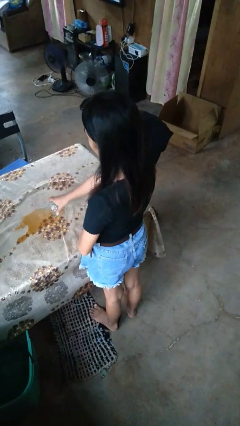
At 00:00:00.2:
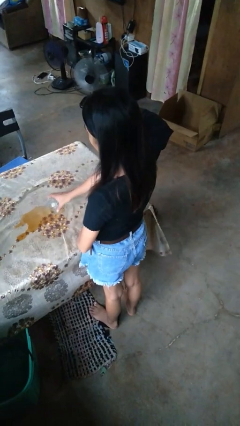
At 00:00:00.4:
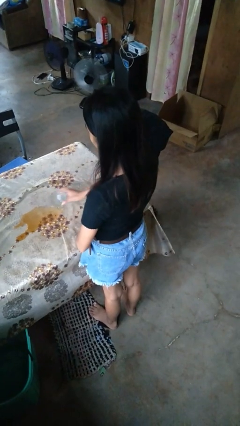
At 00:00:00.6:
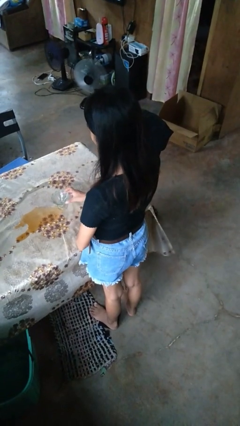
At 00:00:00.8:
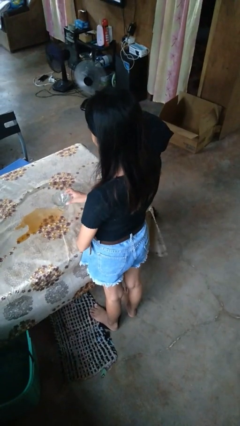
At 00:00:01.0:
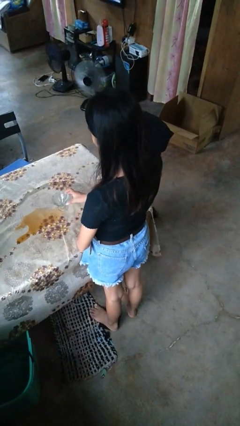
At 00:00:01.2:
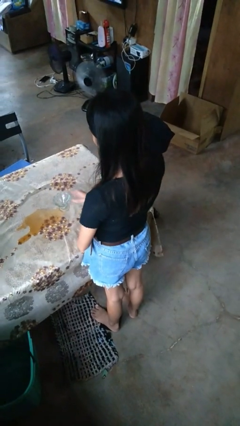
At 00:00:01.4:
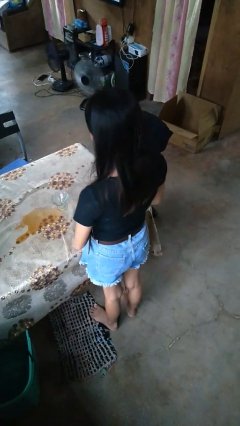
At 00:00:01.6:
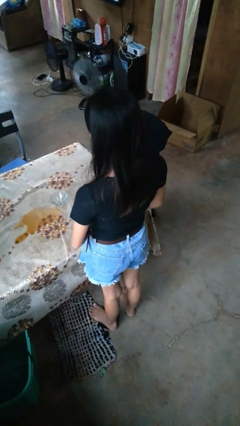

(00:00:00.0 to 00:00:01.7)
person sets upright glass

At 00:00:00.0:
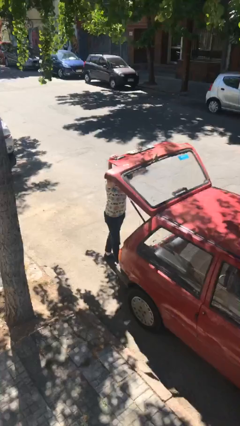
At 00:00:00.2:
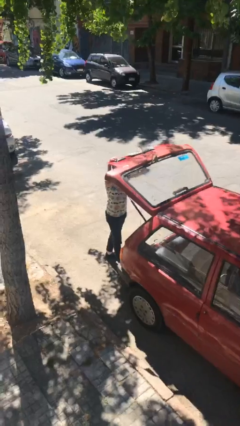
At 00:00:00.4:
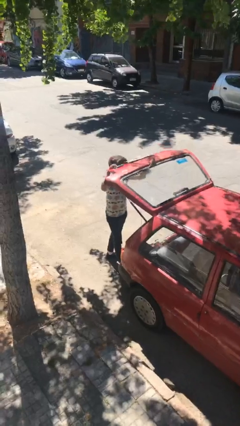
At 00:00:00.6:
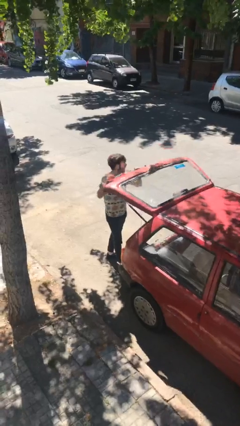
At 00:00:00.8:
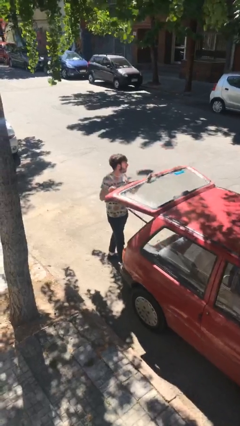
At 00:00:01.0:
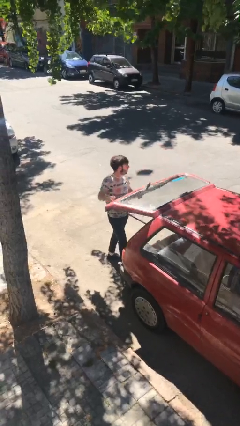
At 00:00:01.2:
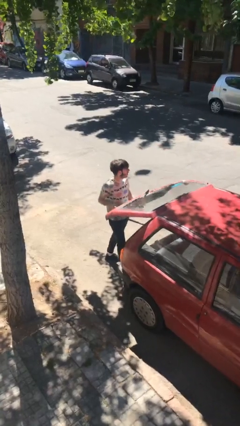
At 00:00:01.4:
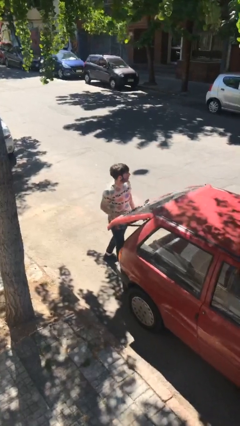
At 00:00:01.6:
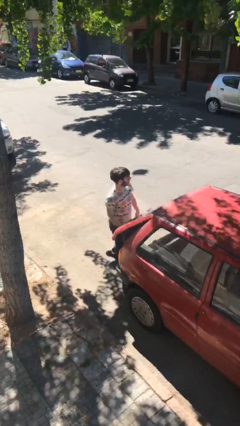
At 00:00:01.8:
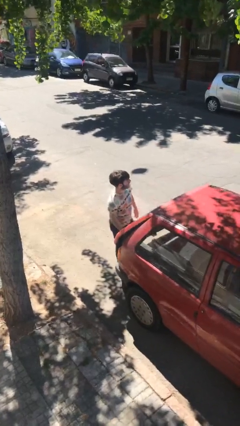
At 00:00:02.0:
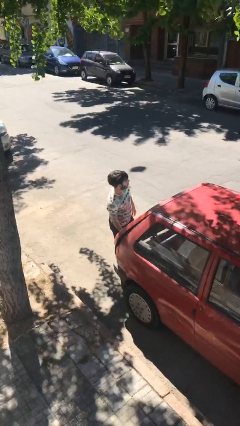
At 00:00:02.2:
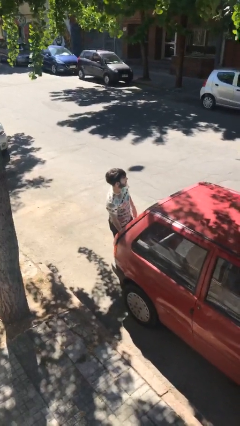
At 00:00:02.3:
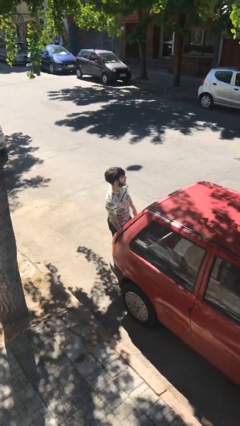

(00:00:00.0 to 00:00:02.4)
person closes car trunk

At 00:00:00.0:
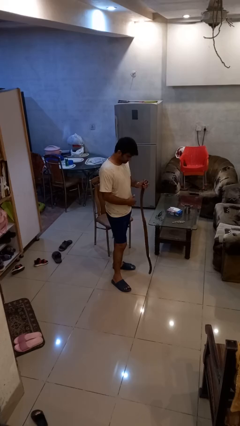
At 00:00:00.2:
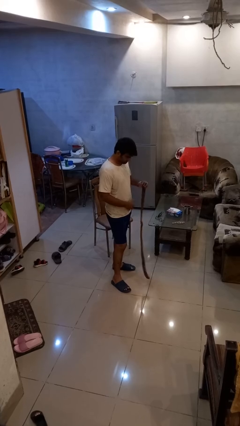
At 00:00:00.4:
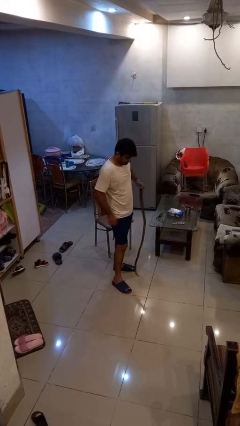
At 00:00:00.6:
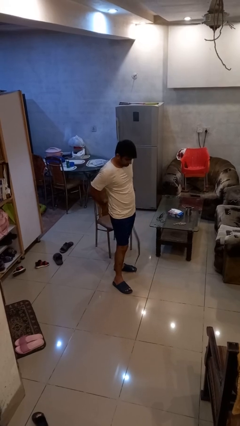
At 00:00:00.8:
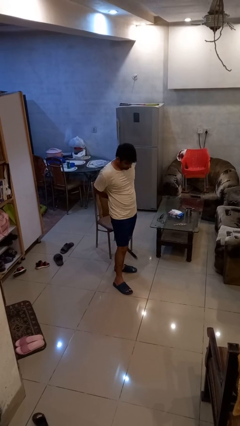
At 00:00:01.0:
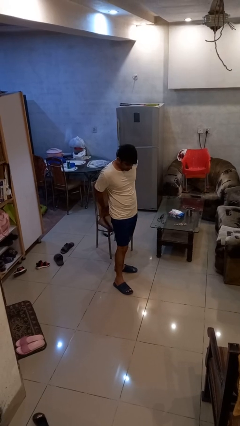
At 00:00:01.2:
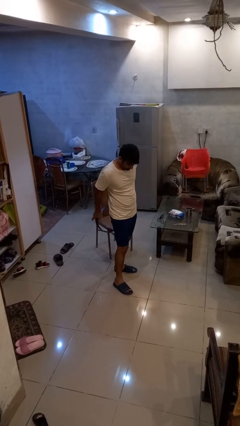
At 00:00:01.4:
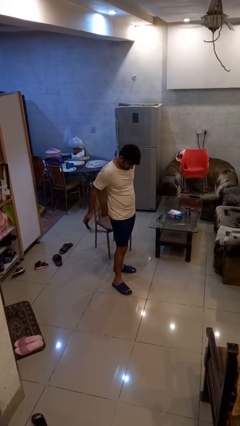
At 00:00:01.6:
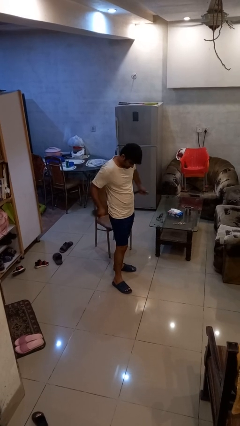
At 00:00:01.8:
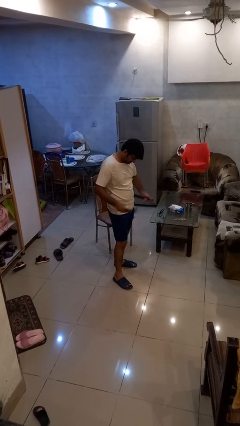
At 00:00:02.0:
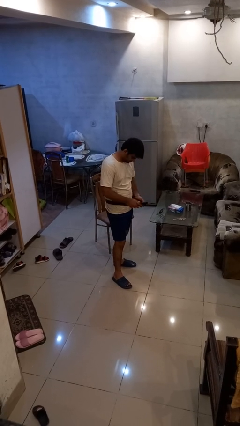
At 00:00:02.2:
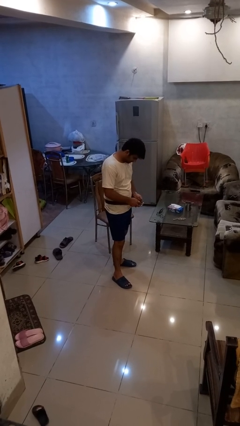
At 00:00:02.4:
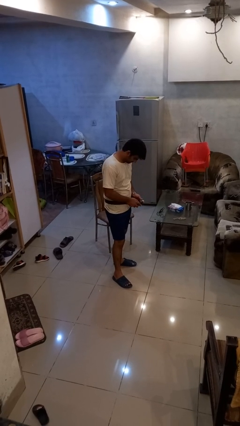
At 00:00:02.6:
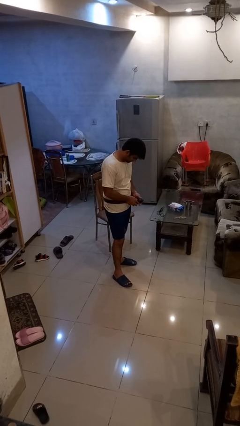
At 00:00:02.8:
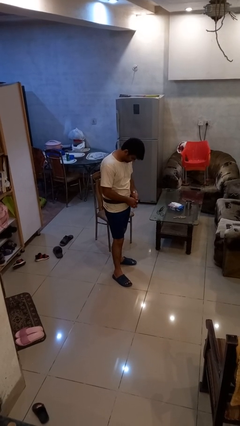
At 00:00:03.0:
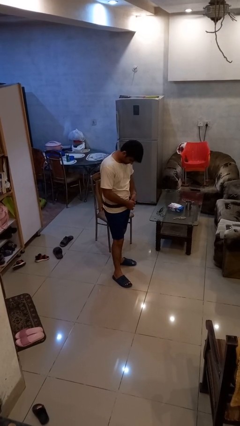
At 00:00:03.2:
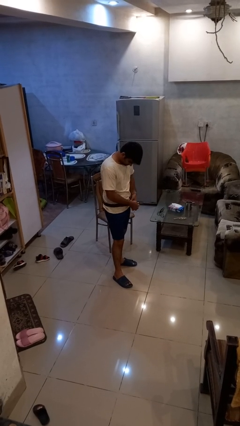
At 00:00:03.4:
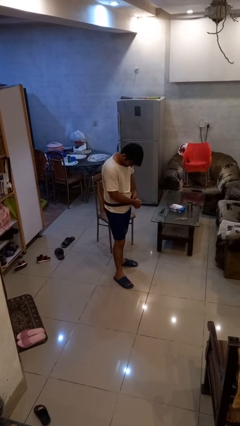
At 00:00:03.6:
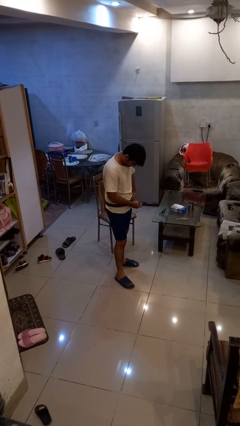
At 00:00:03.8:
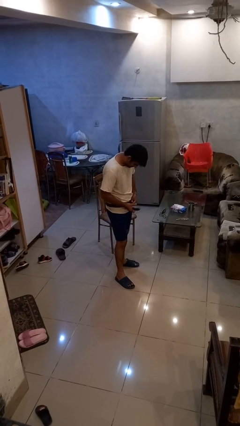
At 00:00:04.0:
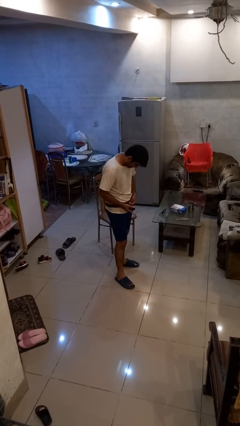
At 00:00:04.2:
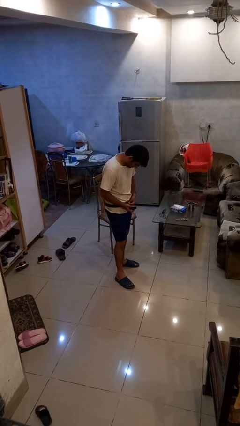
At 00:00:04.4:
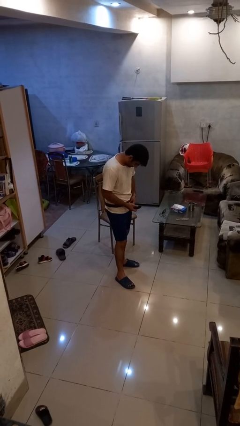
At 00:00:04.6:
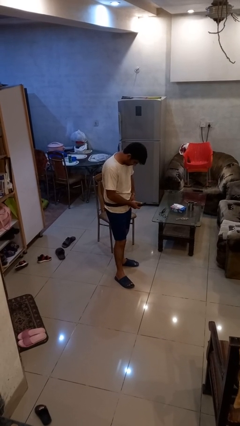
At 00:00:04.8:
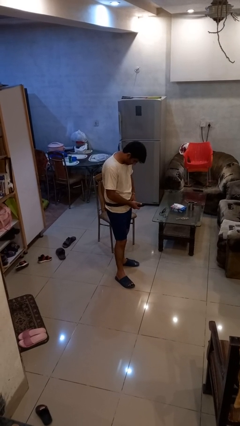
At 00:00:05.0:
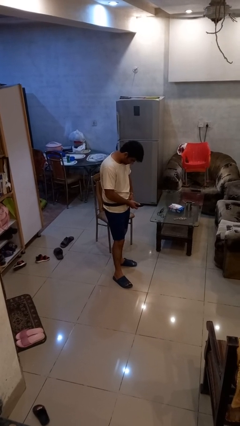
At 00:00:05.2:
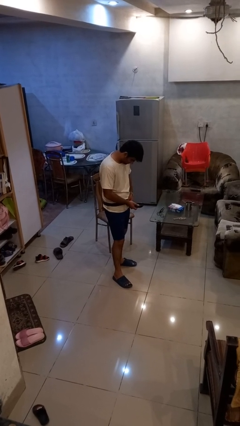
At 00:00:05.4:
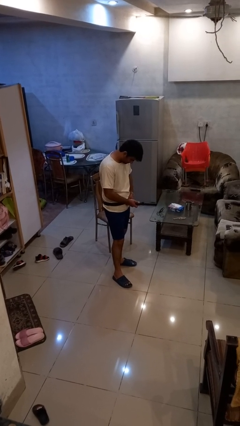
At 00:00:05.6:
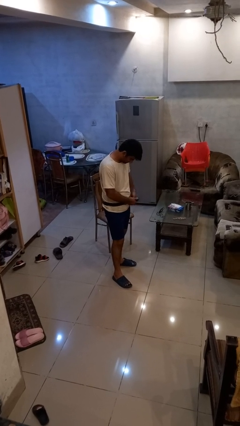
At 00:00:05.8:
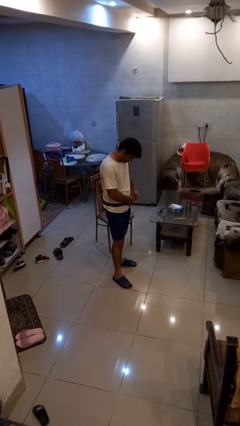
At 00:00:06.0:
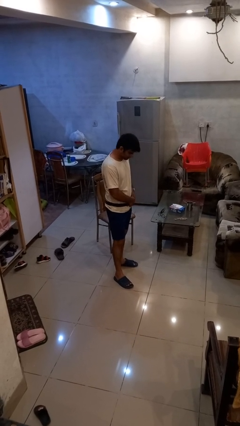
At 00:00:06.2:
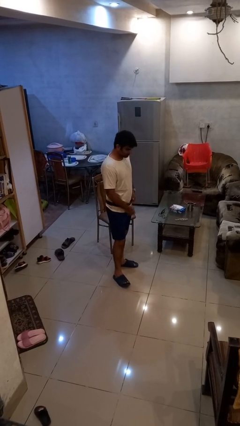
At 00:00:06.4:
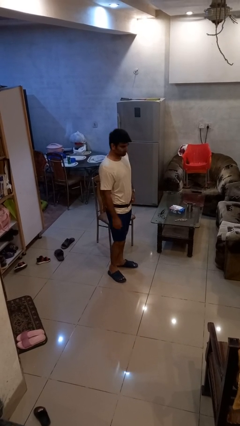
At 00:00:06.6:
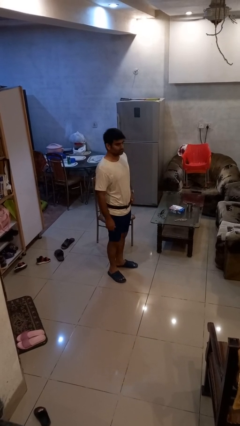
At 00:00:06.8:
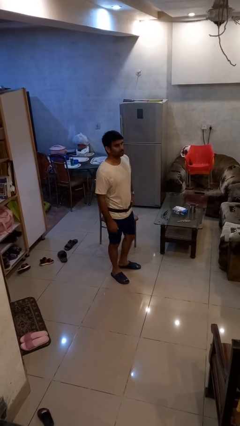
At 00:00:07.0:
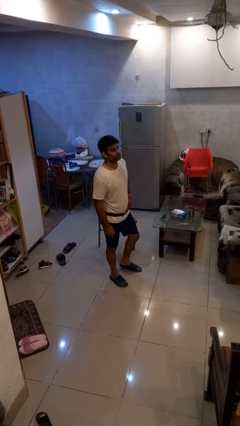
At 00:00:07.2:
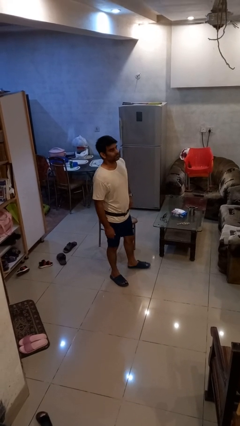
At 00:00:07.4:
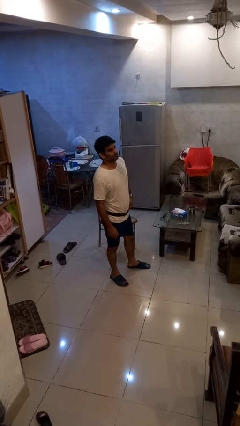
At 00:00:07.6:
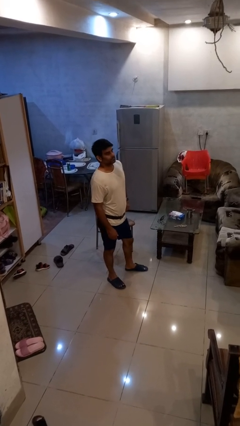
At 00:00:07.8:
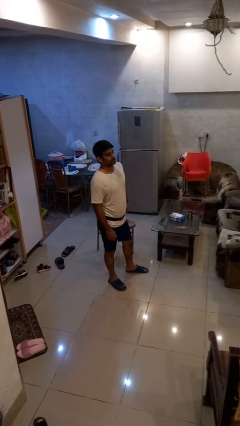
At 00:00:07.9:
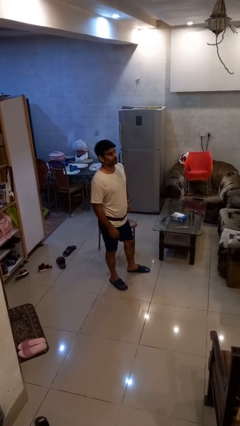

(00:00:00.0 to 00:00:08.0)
person puts on belt

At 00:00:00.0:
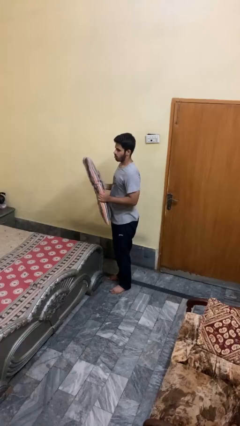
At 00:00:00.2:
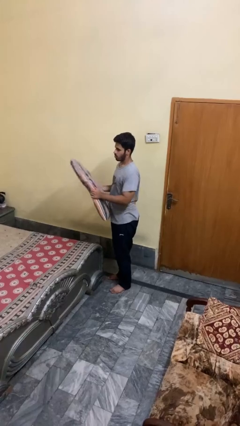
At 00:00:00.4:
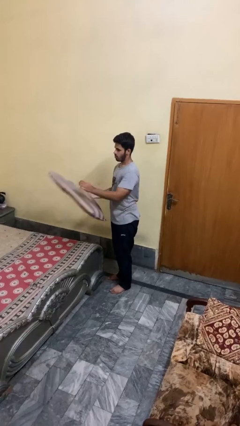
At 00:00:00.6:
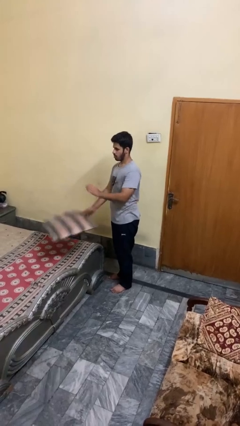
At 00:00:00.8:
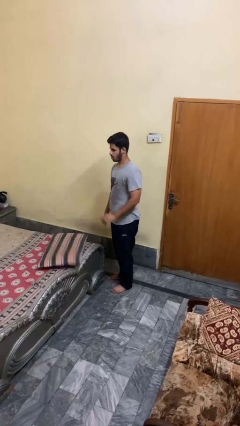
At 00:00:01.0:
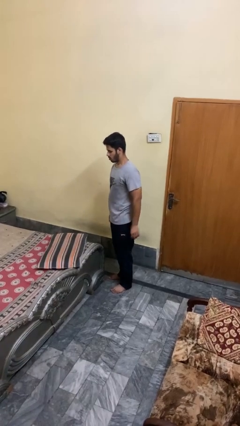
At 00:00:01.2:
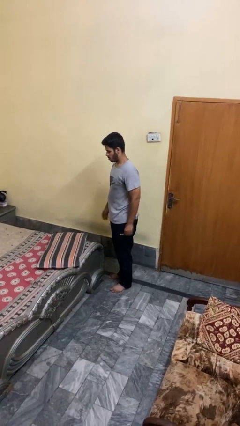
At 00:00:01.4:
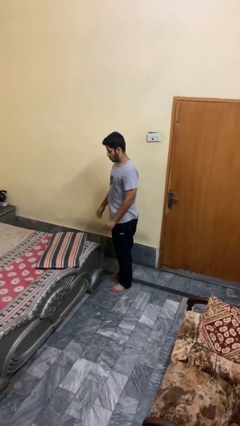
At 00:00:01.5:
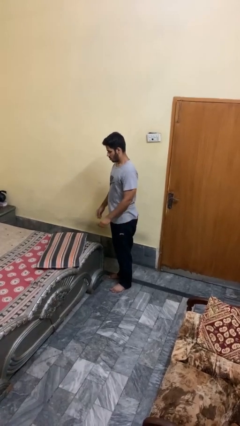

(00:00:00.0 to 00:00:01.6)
person puts down object on bed

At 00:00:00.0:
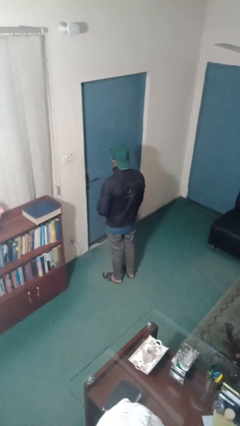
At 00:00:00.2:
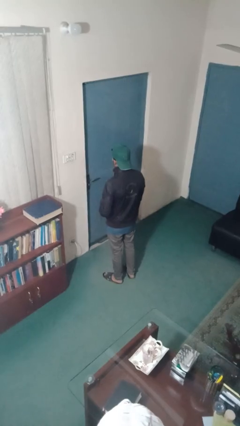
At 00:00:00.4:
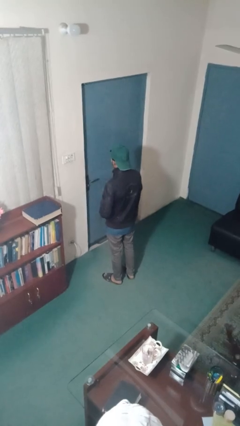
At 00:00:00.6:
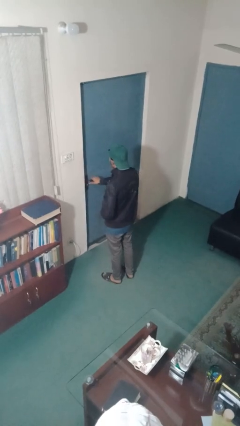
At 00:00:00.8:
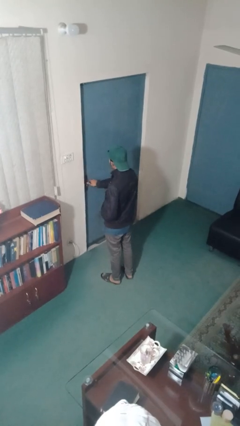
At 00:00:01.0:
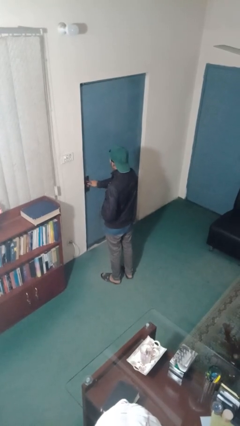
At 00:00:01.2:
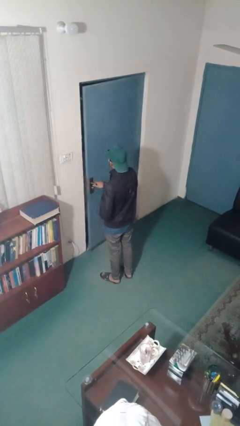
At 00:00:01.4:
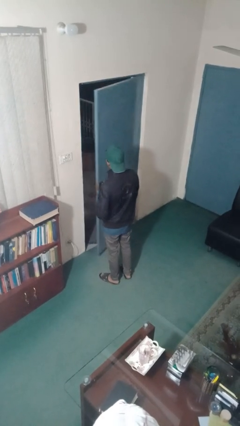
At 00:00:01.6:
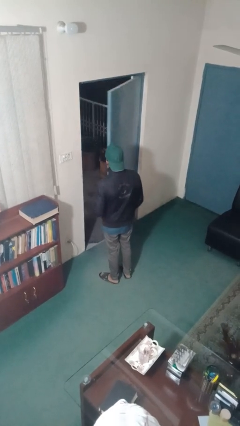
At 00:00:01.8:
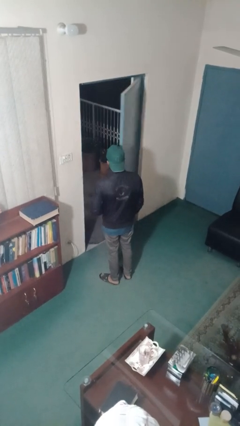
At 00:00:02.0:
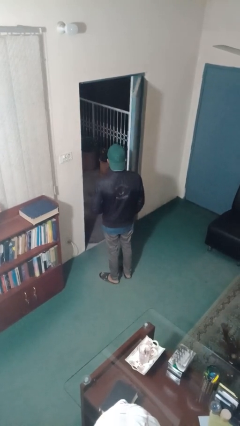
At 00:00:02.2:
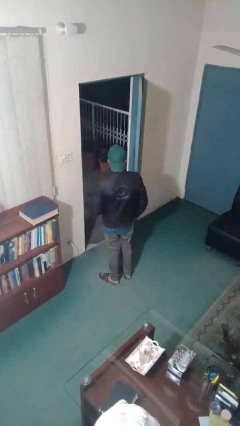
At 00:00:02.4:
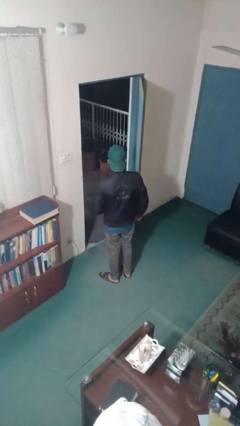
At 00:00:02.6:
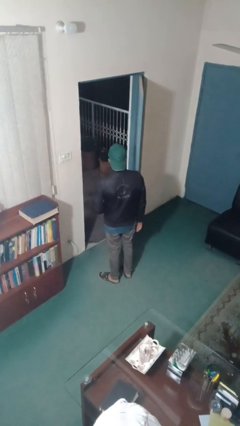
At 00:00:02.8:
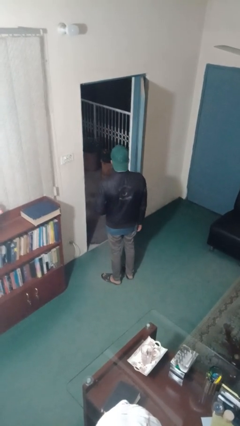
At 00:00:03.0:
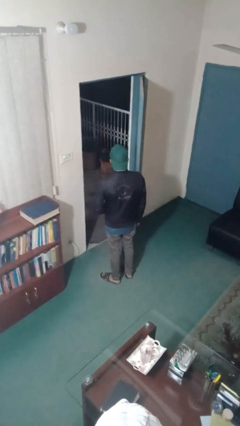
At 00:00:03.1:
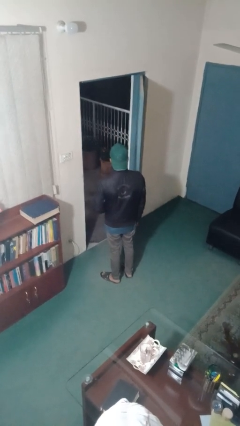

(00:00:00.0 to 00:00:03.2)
person opens facility door

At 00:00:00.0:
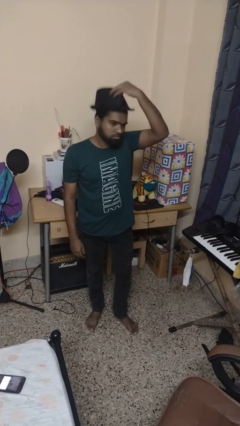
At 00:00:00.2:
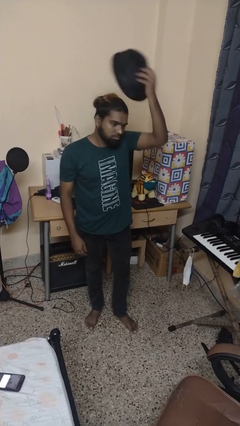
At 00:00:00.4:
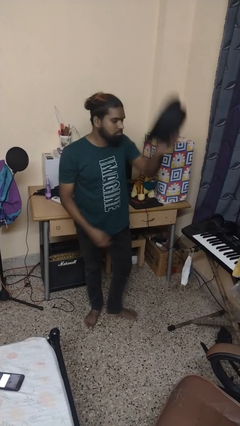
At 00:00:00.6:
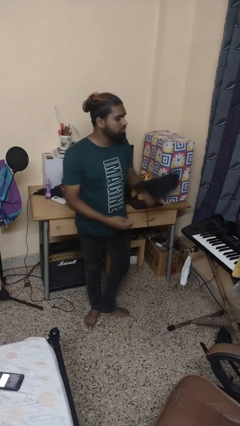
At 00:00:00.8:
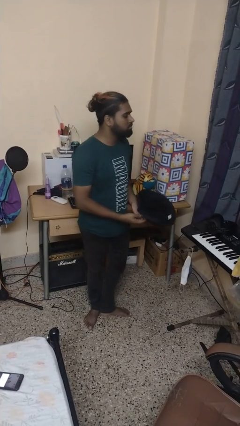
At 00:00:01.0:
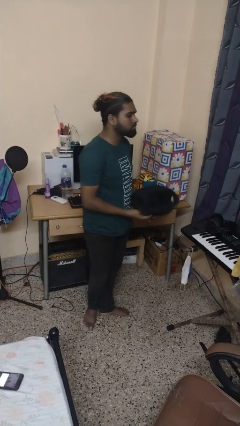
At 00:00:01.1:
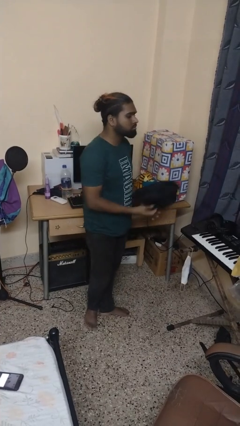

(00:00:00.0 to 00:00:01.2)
person takes off hat
